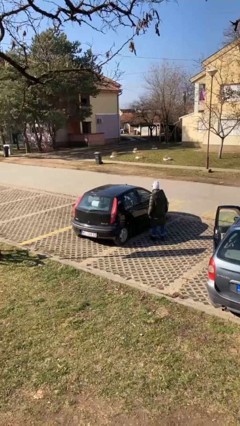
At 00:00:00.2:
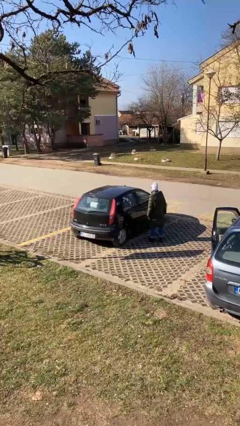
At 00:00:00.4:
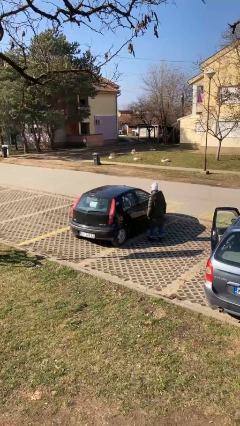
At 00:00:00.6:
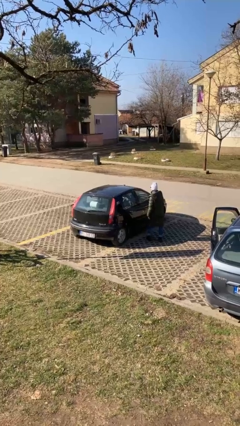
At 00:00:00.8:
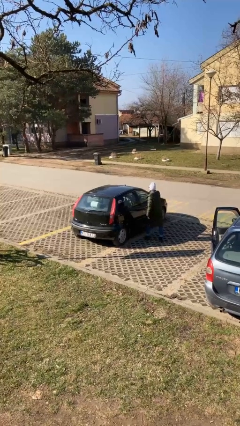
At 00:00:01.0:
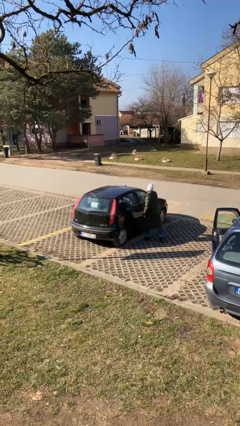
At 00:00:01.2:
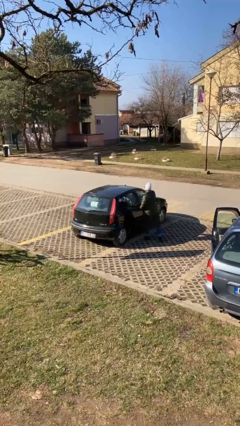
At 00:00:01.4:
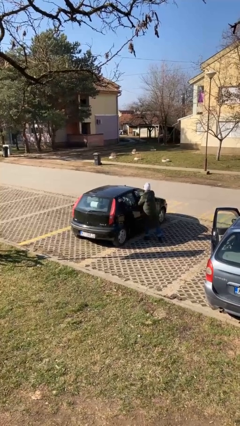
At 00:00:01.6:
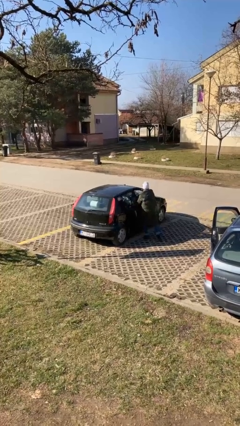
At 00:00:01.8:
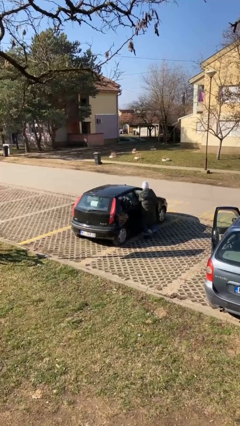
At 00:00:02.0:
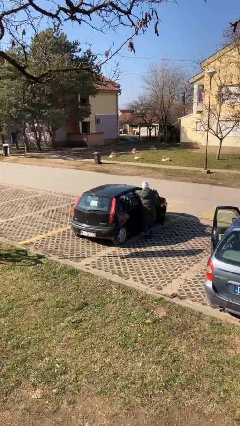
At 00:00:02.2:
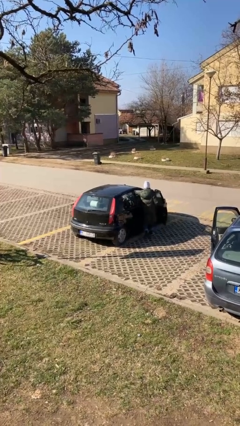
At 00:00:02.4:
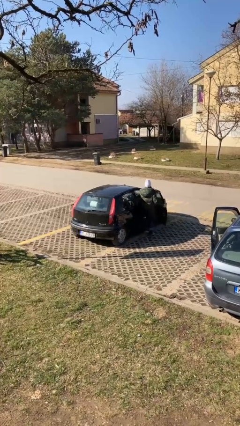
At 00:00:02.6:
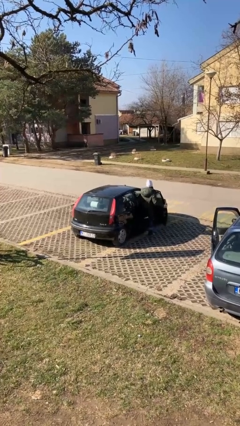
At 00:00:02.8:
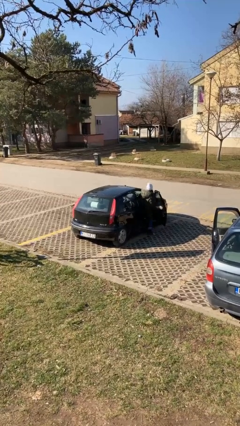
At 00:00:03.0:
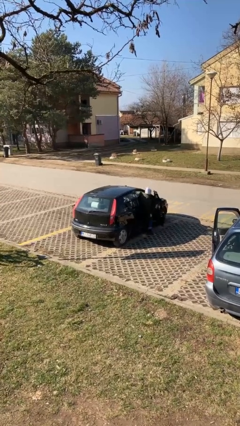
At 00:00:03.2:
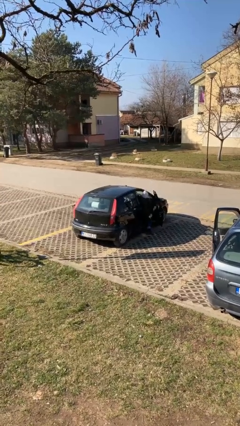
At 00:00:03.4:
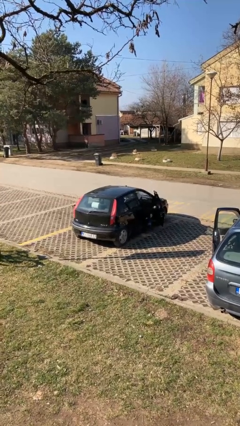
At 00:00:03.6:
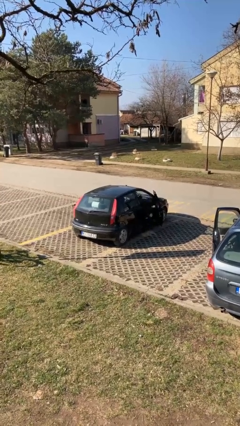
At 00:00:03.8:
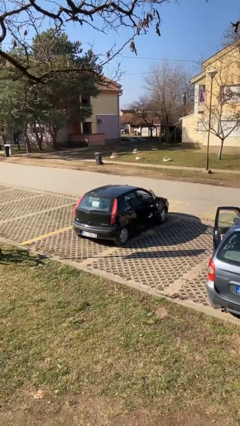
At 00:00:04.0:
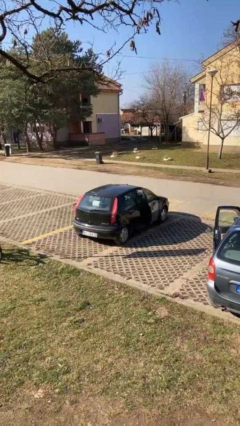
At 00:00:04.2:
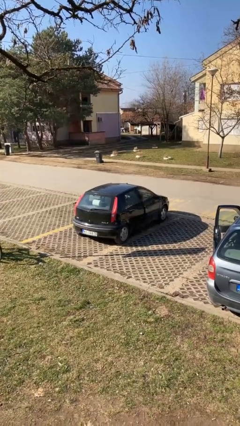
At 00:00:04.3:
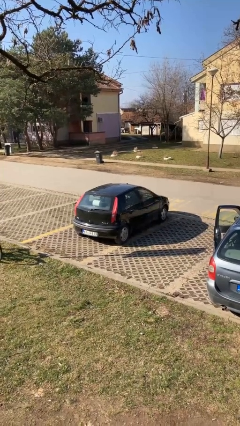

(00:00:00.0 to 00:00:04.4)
car picks up person

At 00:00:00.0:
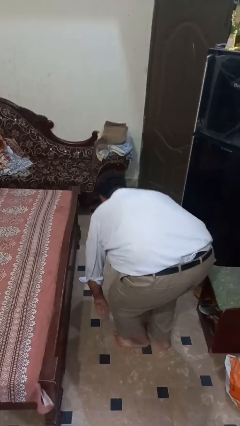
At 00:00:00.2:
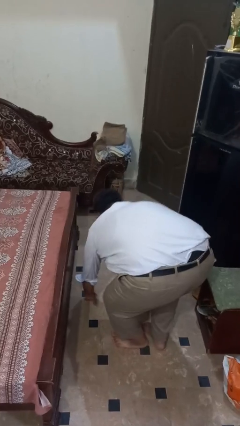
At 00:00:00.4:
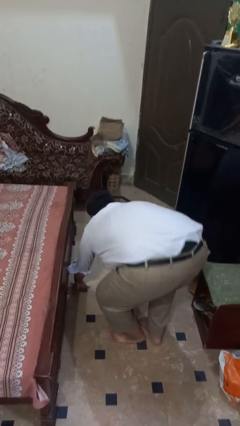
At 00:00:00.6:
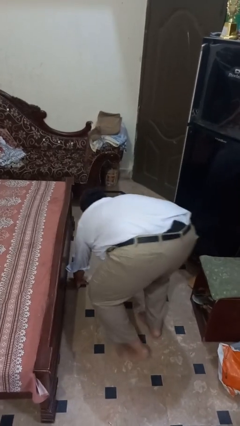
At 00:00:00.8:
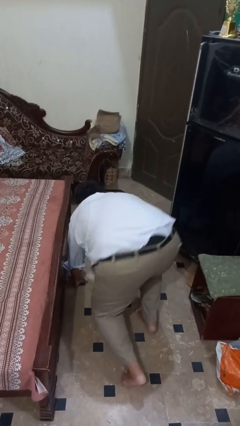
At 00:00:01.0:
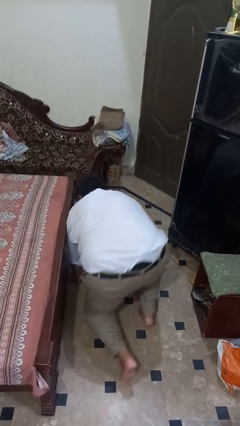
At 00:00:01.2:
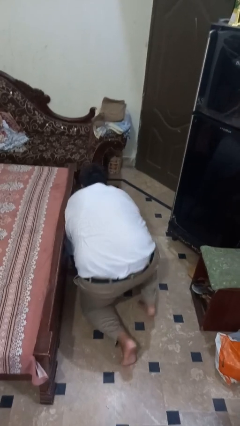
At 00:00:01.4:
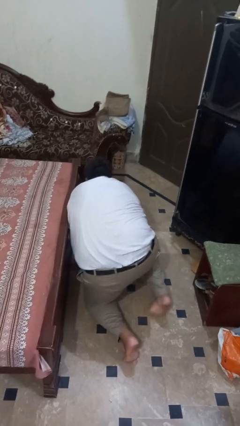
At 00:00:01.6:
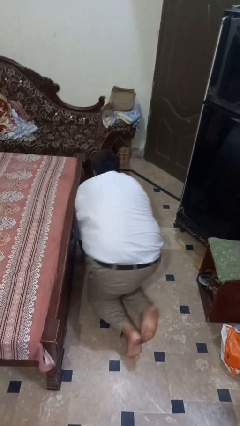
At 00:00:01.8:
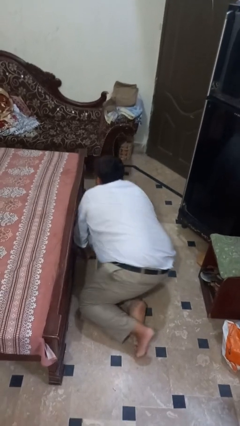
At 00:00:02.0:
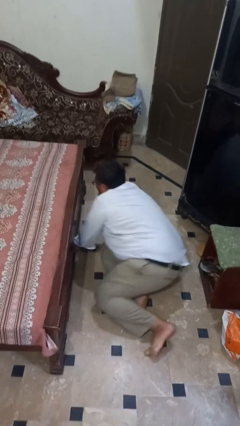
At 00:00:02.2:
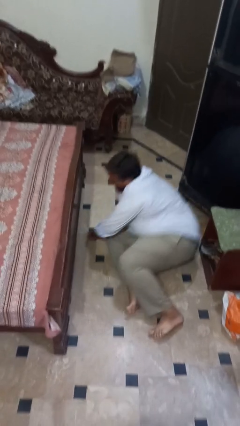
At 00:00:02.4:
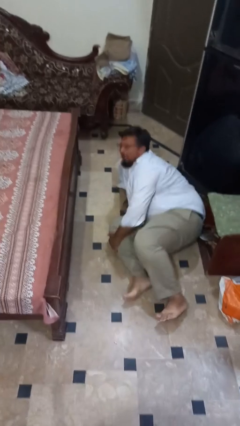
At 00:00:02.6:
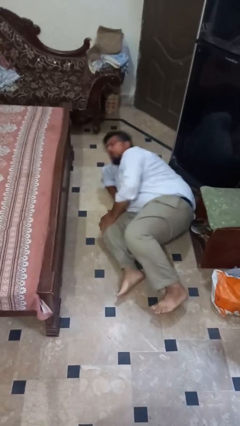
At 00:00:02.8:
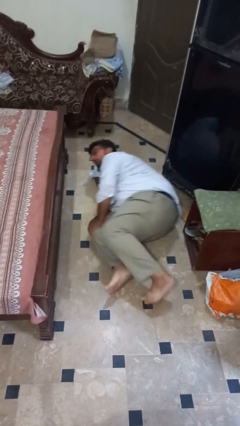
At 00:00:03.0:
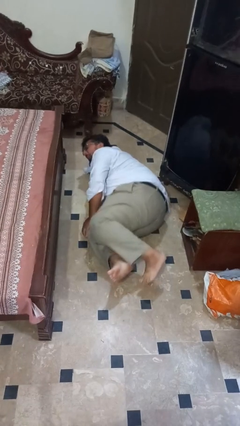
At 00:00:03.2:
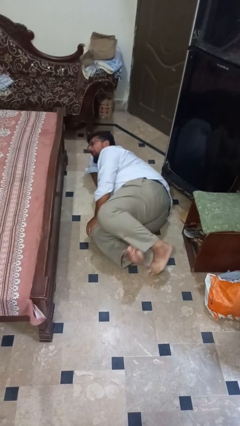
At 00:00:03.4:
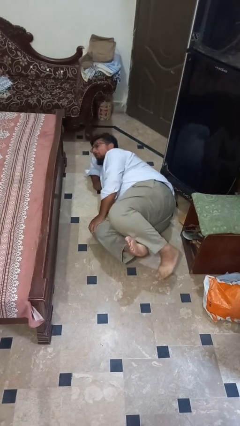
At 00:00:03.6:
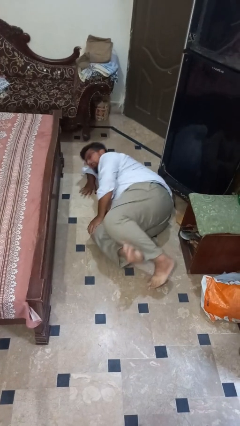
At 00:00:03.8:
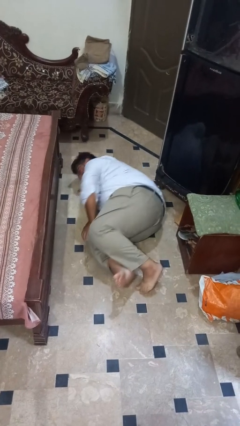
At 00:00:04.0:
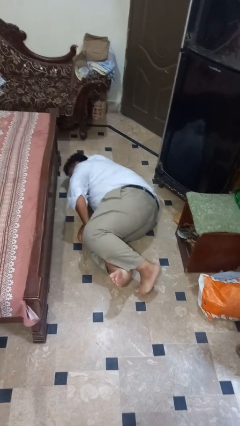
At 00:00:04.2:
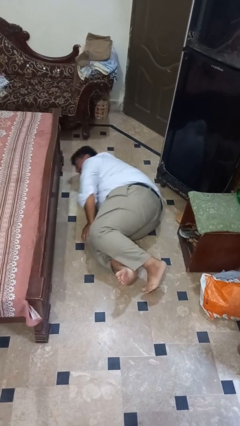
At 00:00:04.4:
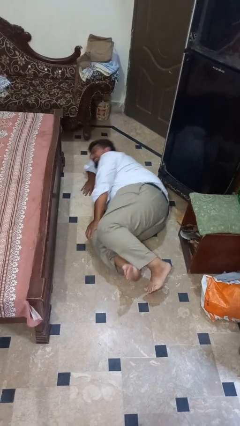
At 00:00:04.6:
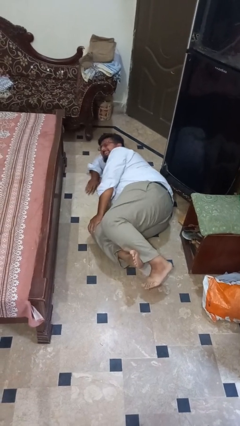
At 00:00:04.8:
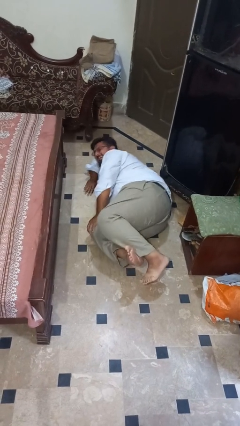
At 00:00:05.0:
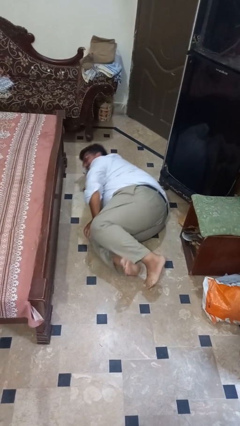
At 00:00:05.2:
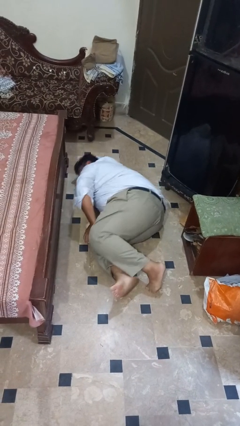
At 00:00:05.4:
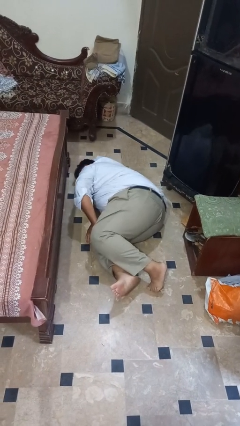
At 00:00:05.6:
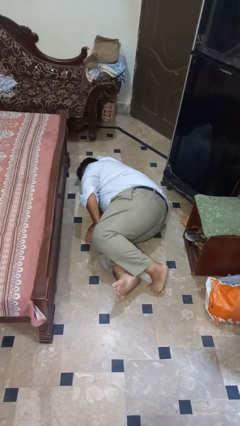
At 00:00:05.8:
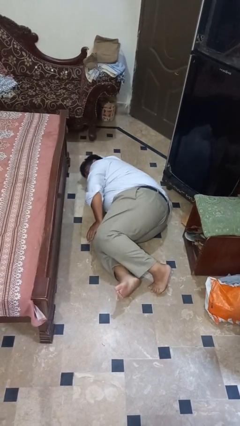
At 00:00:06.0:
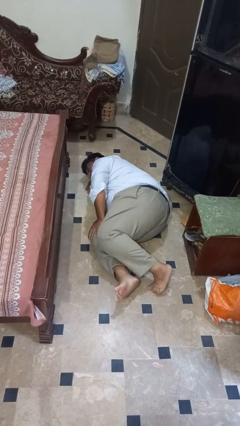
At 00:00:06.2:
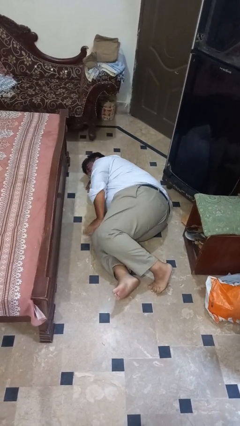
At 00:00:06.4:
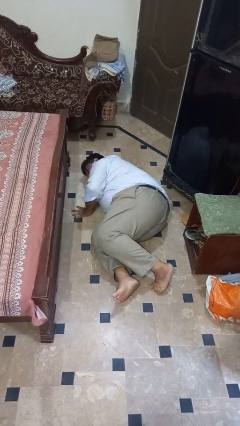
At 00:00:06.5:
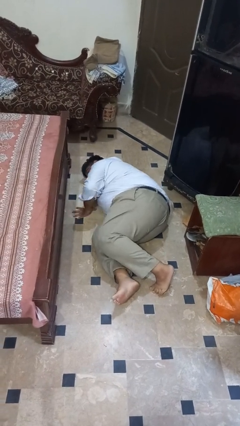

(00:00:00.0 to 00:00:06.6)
person lies down on floor

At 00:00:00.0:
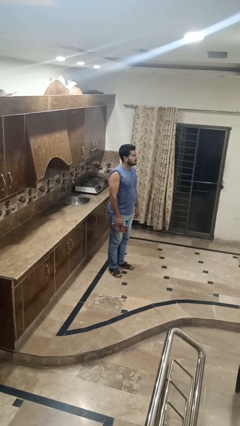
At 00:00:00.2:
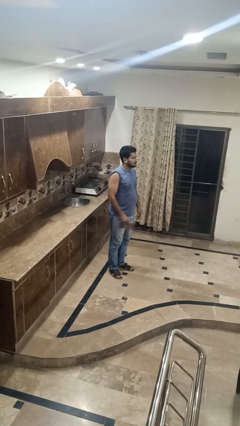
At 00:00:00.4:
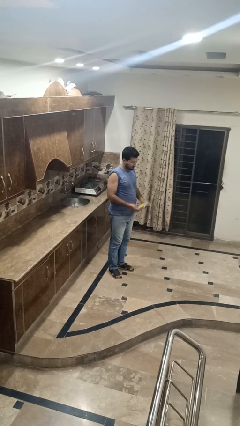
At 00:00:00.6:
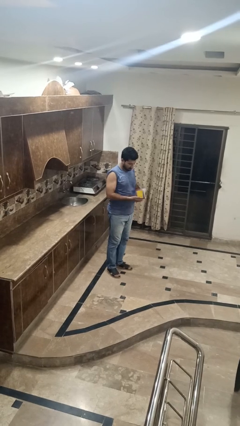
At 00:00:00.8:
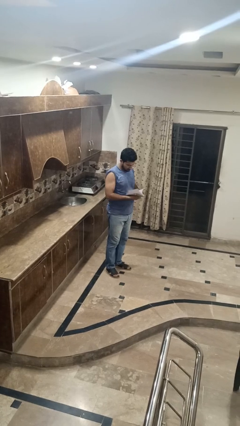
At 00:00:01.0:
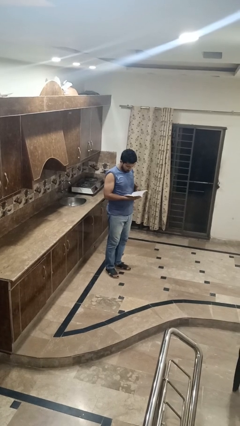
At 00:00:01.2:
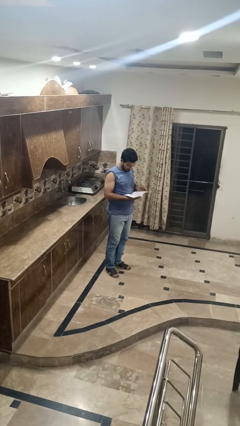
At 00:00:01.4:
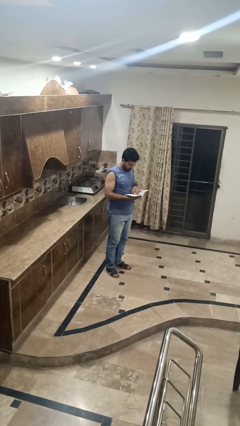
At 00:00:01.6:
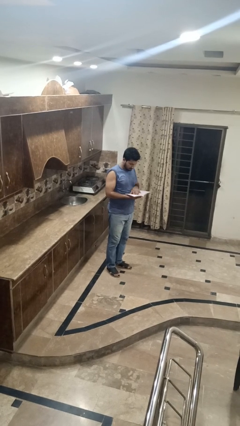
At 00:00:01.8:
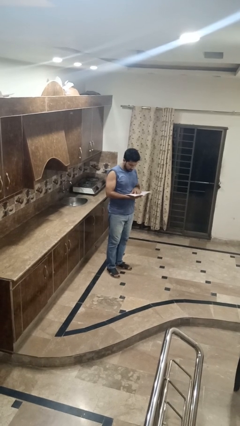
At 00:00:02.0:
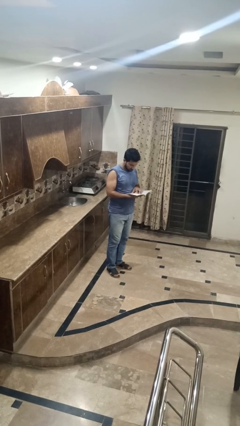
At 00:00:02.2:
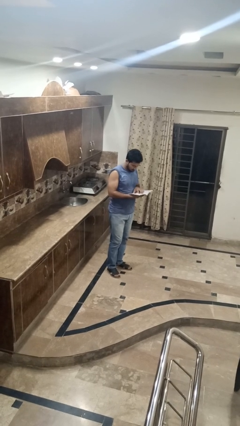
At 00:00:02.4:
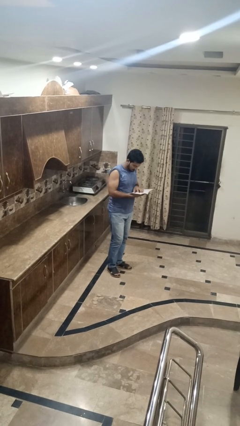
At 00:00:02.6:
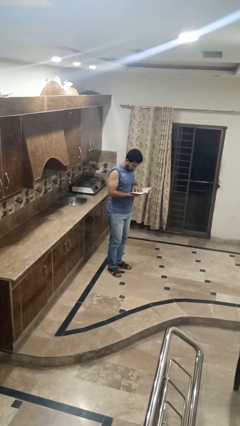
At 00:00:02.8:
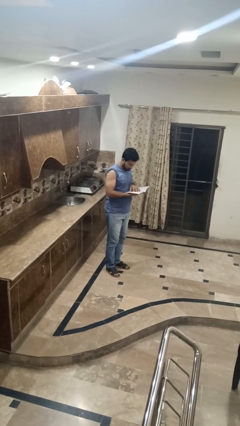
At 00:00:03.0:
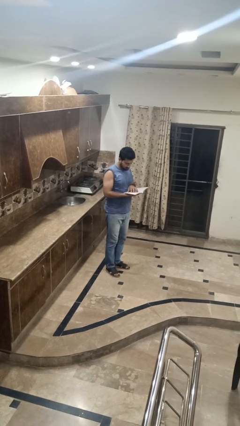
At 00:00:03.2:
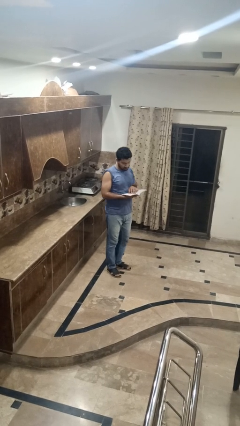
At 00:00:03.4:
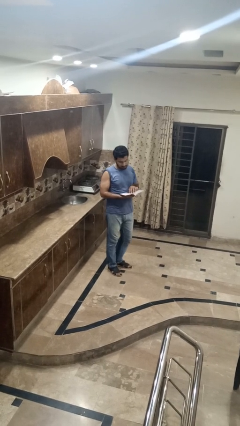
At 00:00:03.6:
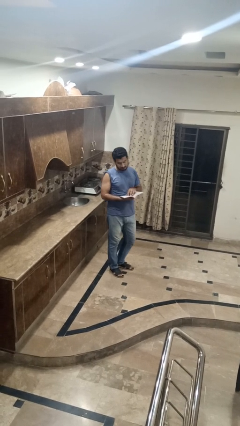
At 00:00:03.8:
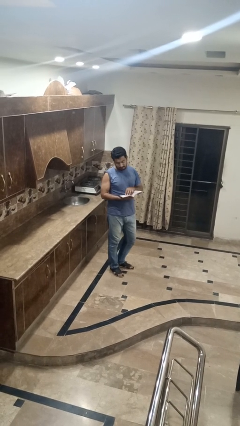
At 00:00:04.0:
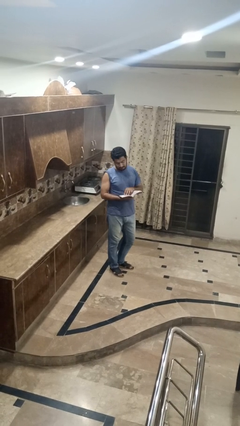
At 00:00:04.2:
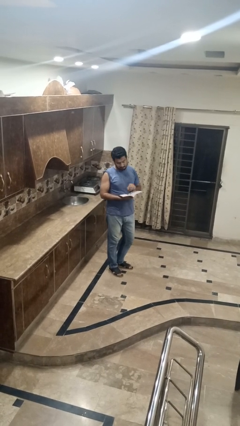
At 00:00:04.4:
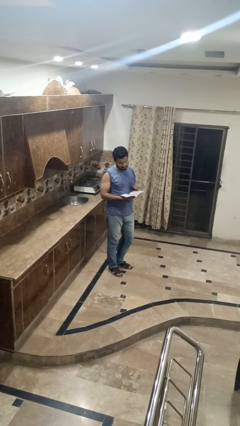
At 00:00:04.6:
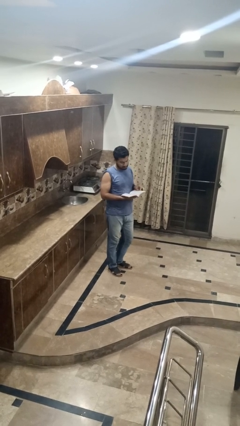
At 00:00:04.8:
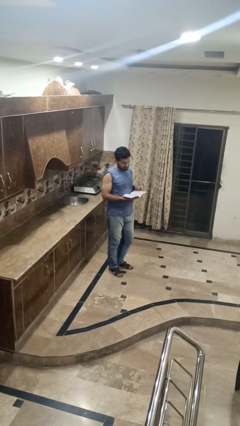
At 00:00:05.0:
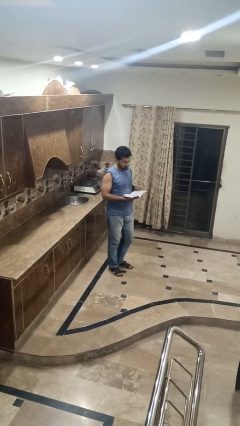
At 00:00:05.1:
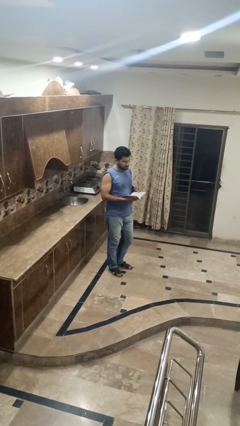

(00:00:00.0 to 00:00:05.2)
person reads book

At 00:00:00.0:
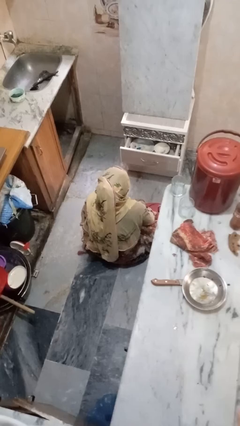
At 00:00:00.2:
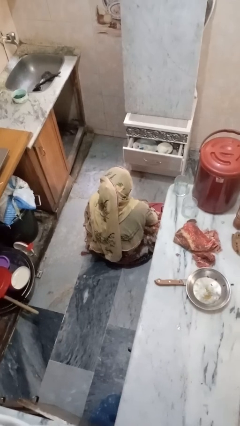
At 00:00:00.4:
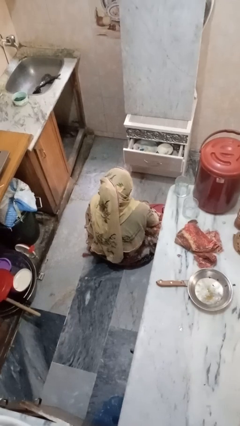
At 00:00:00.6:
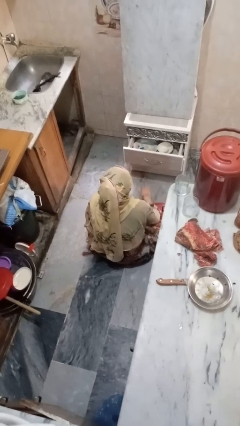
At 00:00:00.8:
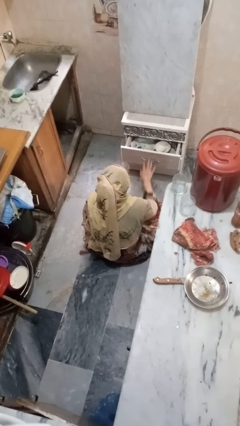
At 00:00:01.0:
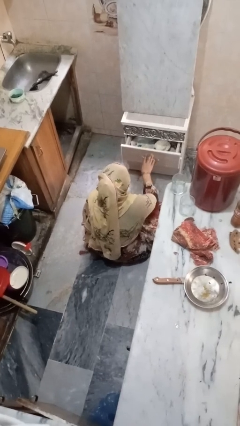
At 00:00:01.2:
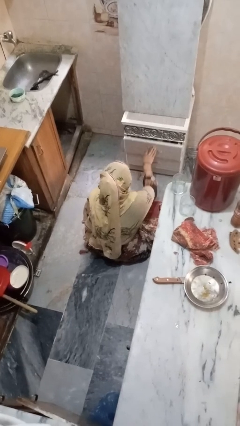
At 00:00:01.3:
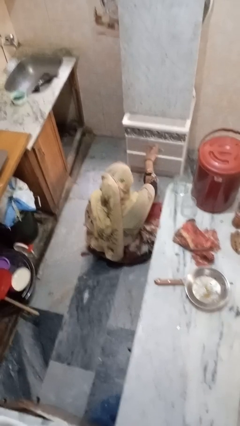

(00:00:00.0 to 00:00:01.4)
person closes kitchen drawer
